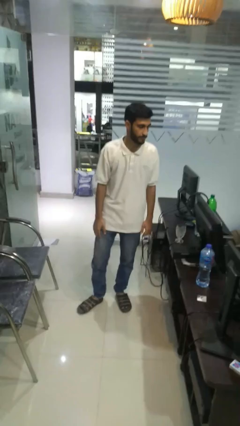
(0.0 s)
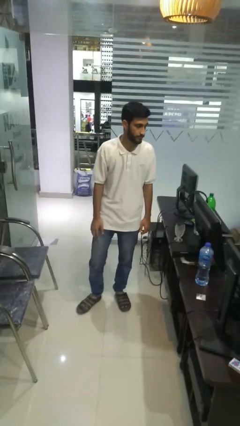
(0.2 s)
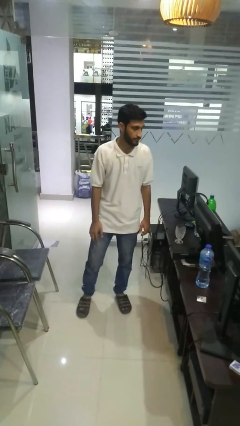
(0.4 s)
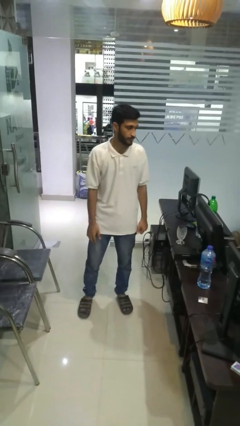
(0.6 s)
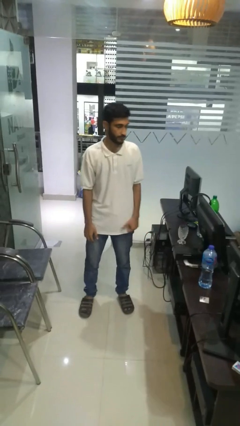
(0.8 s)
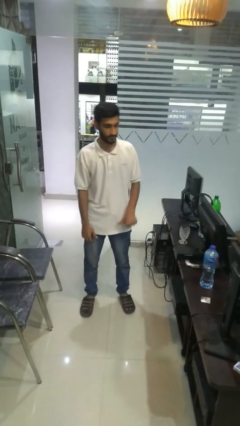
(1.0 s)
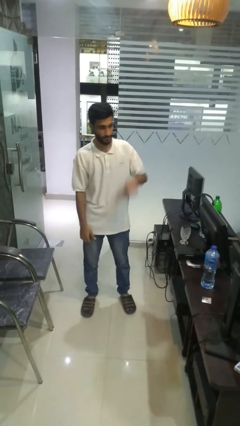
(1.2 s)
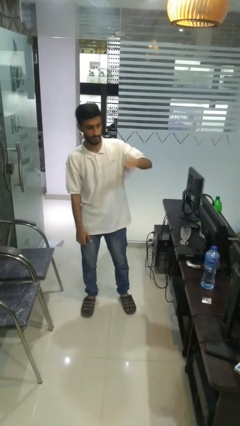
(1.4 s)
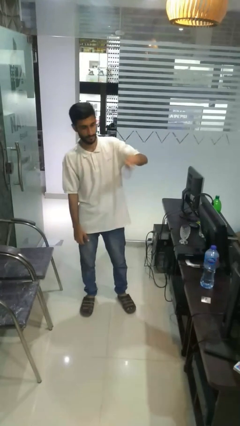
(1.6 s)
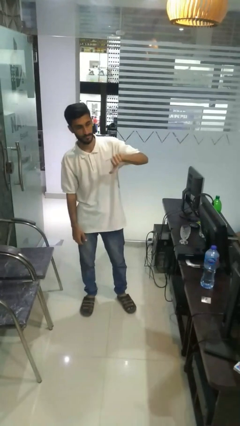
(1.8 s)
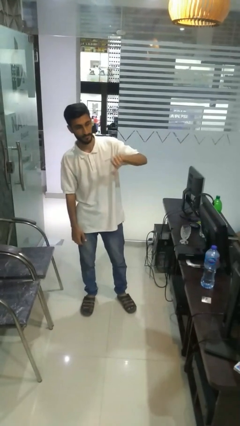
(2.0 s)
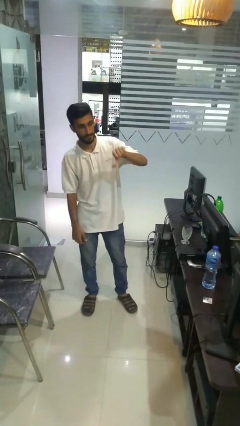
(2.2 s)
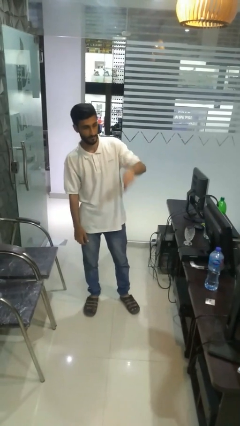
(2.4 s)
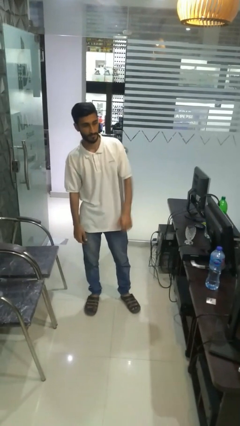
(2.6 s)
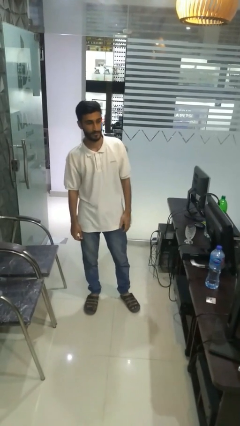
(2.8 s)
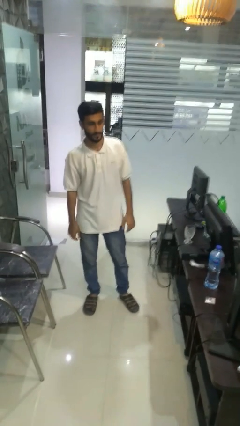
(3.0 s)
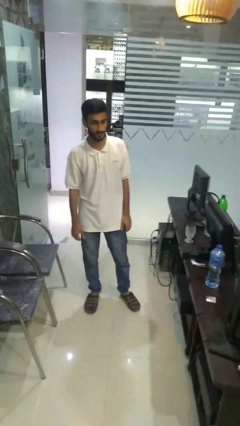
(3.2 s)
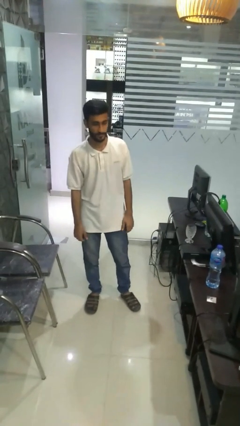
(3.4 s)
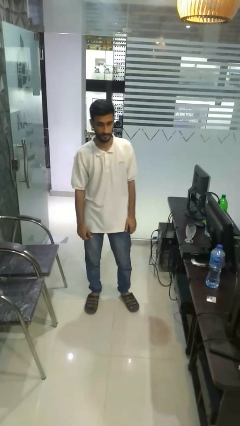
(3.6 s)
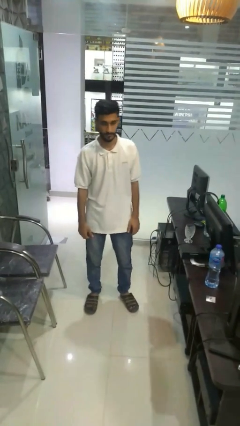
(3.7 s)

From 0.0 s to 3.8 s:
person gestures thumbs down

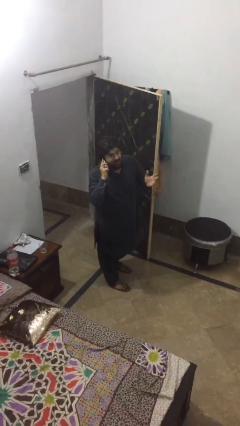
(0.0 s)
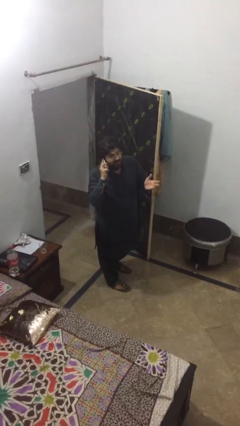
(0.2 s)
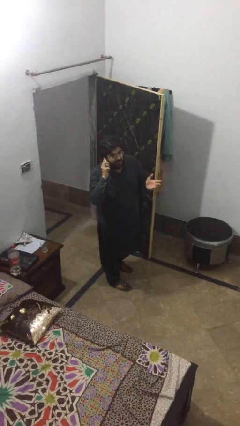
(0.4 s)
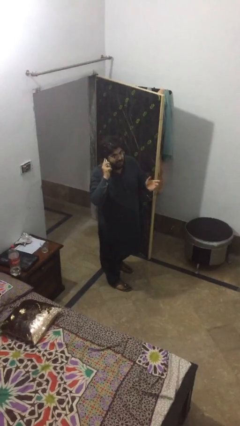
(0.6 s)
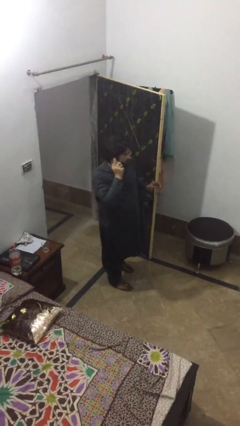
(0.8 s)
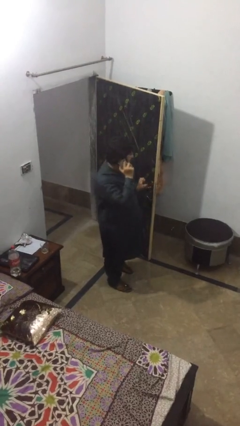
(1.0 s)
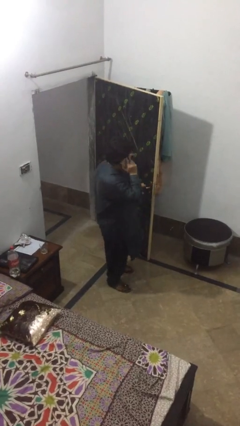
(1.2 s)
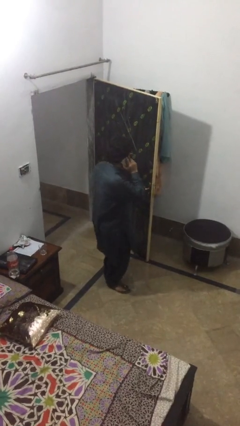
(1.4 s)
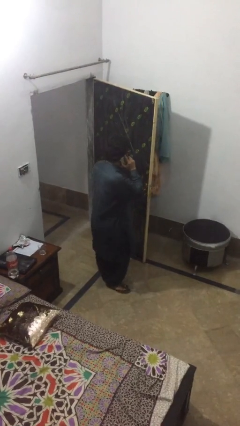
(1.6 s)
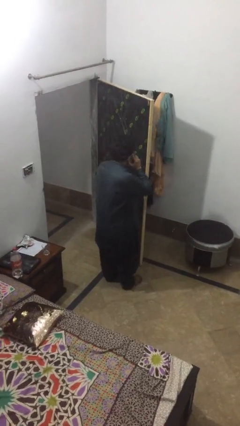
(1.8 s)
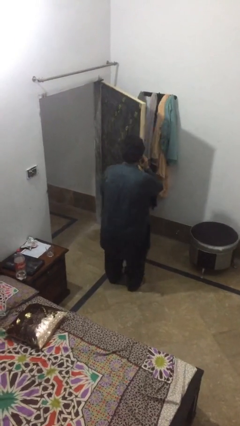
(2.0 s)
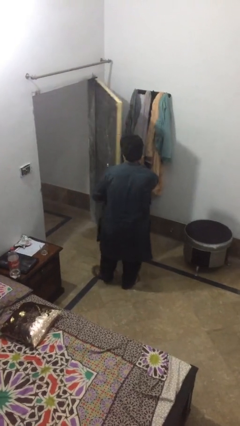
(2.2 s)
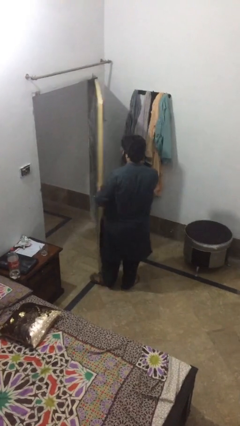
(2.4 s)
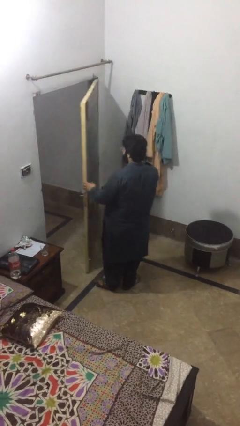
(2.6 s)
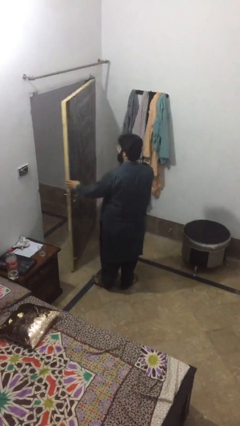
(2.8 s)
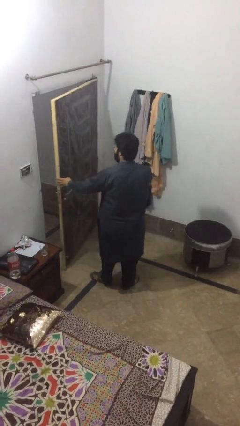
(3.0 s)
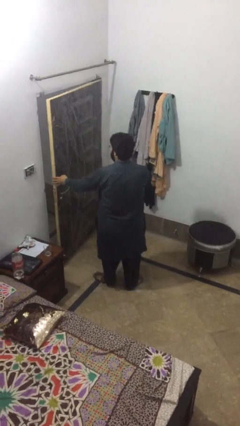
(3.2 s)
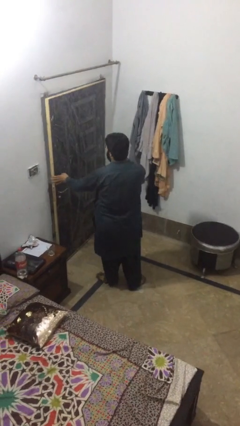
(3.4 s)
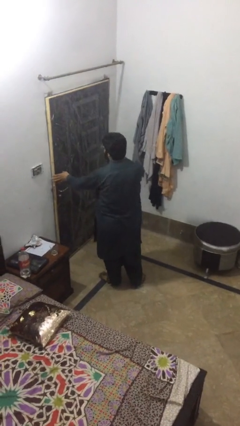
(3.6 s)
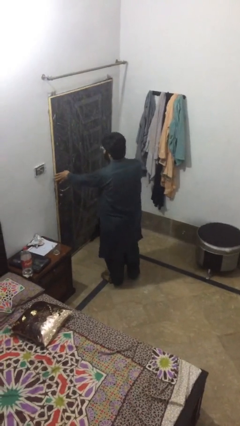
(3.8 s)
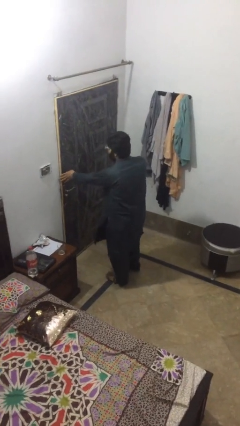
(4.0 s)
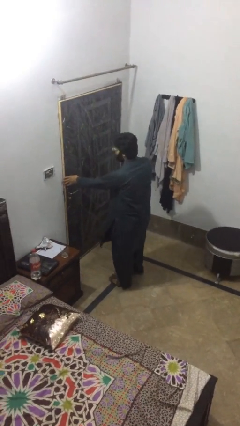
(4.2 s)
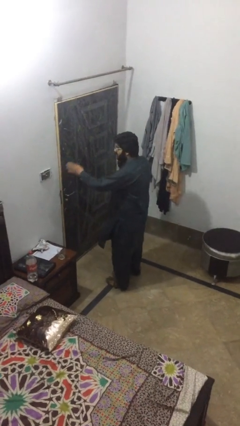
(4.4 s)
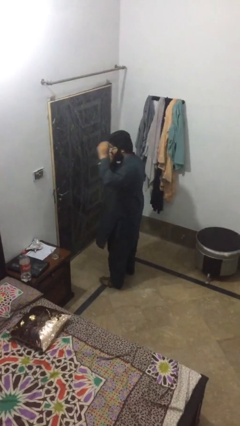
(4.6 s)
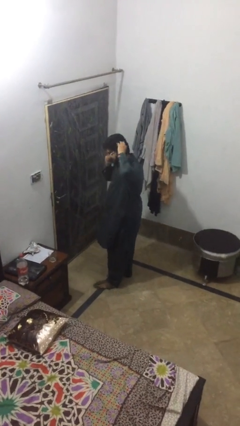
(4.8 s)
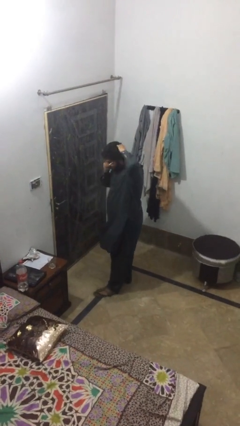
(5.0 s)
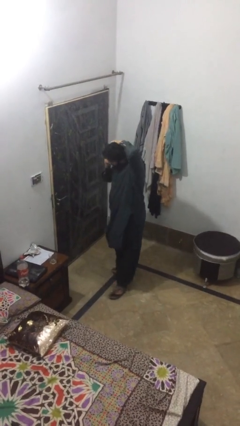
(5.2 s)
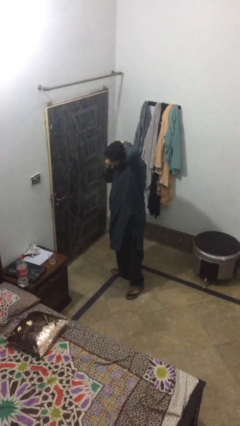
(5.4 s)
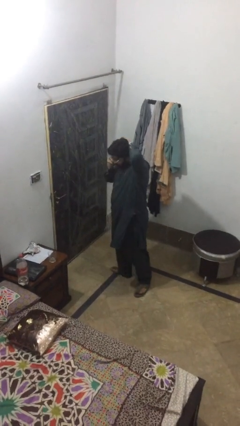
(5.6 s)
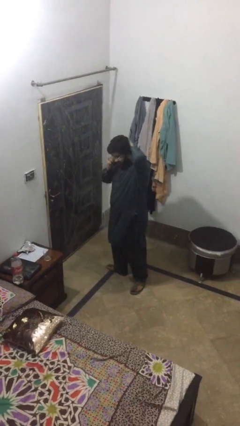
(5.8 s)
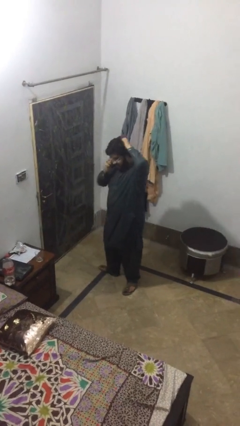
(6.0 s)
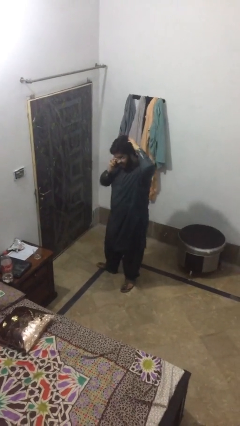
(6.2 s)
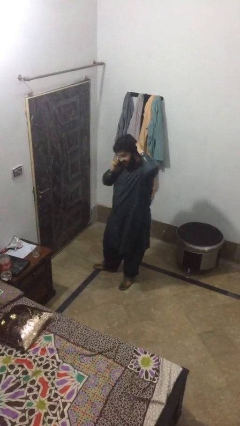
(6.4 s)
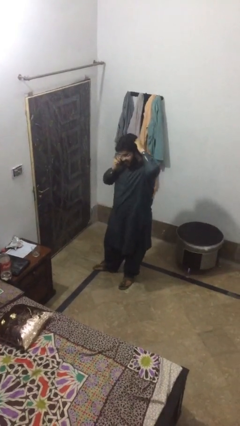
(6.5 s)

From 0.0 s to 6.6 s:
person closes facility door

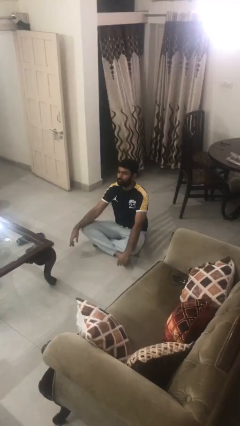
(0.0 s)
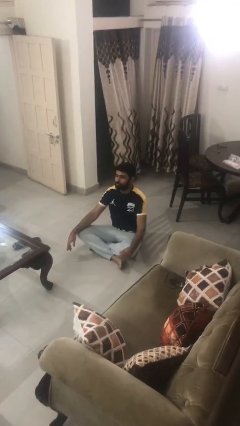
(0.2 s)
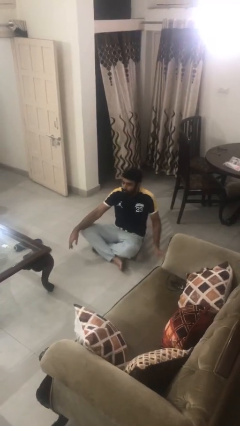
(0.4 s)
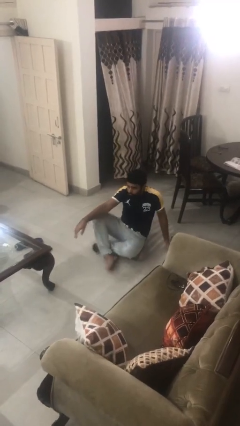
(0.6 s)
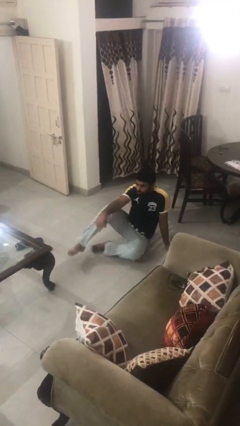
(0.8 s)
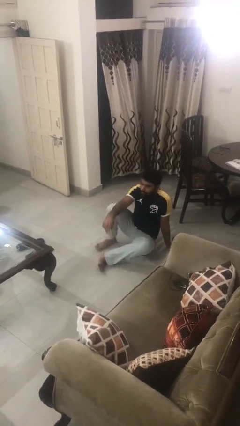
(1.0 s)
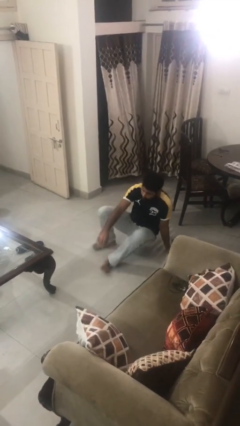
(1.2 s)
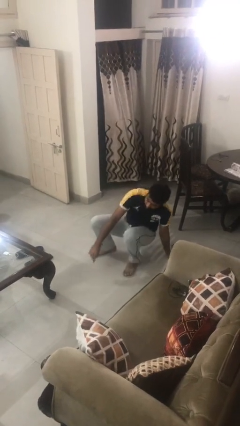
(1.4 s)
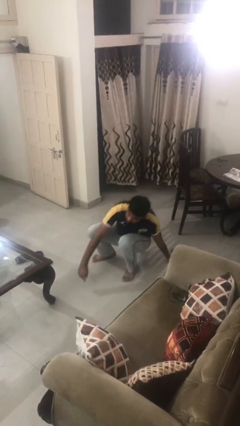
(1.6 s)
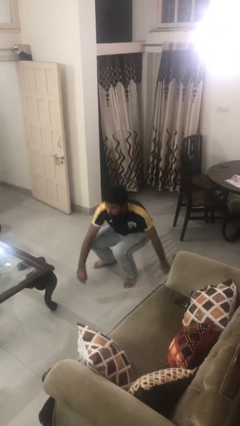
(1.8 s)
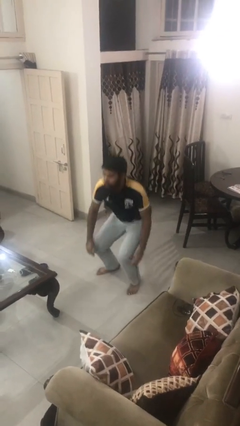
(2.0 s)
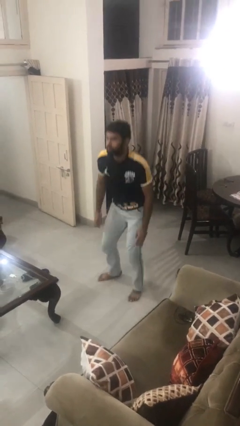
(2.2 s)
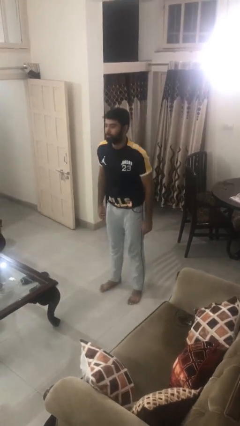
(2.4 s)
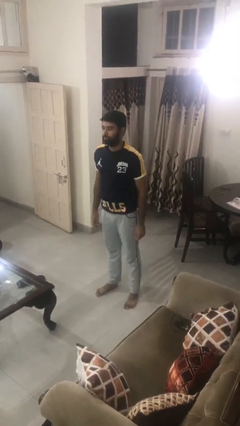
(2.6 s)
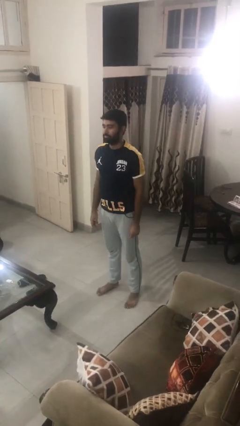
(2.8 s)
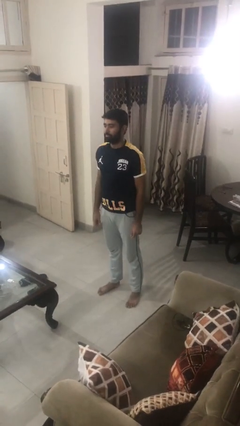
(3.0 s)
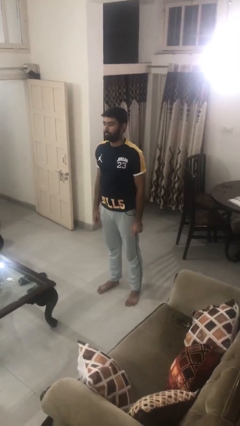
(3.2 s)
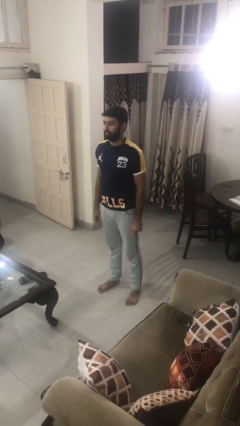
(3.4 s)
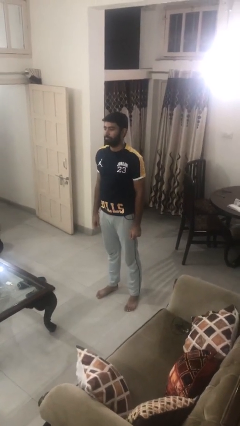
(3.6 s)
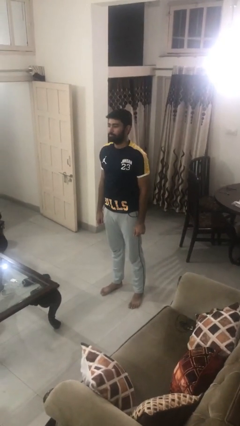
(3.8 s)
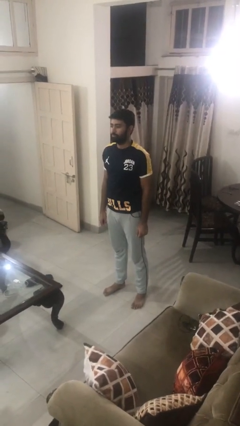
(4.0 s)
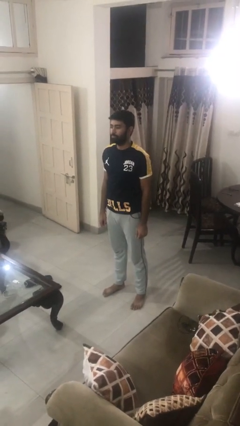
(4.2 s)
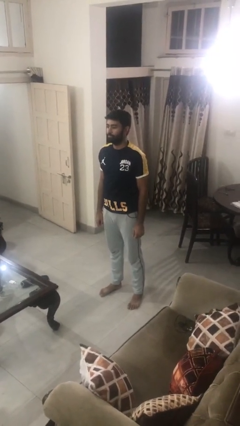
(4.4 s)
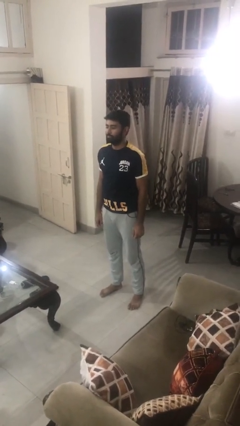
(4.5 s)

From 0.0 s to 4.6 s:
person stands up from floor

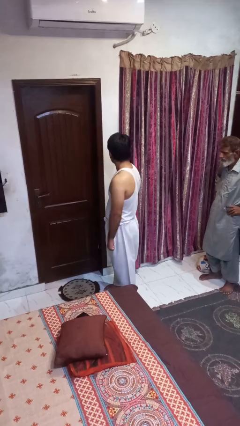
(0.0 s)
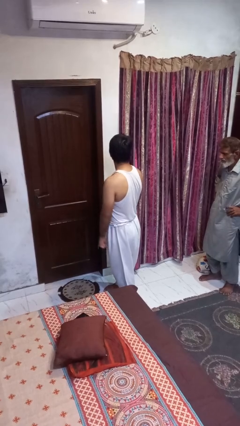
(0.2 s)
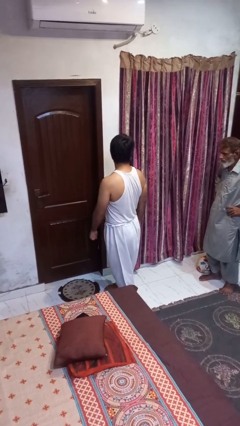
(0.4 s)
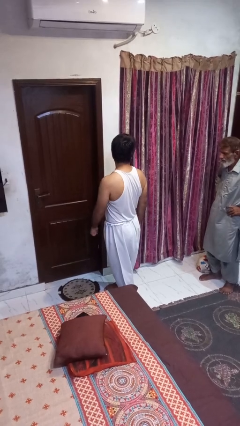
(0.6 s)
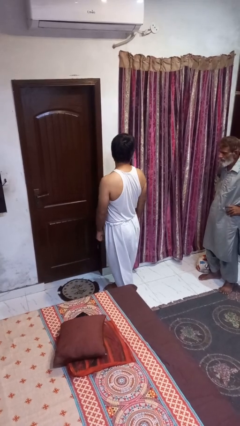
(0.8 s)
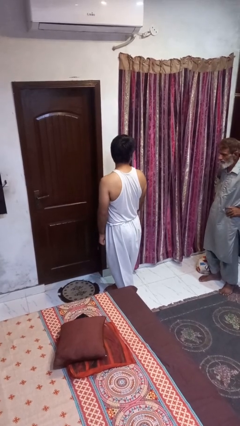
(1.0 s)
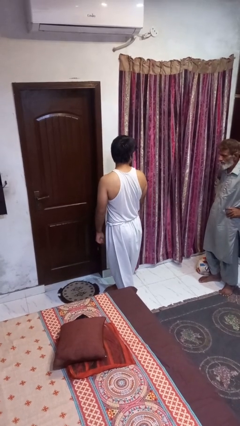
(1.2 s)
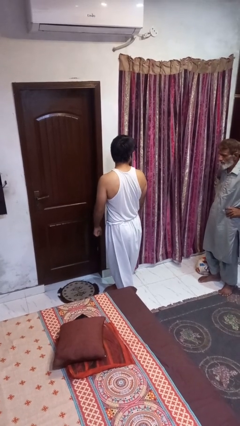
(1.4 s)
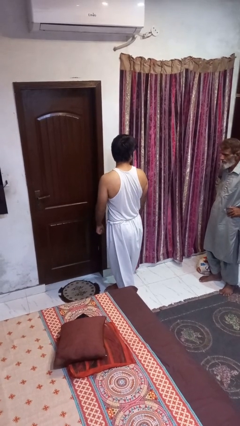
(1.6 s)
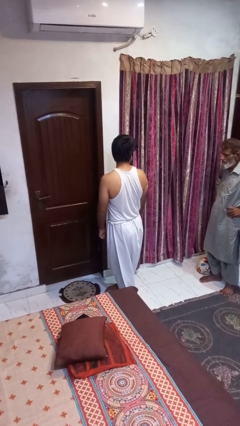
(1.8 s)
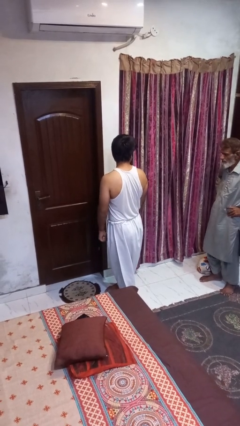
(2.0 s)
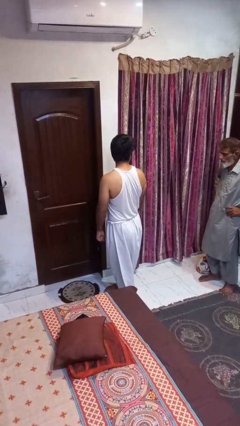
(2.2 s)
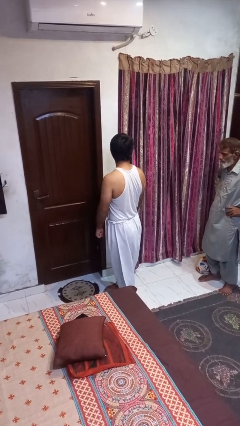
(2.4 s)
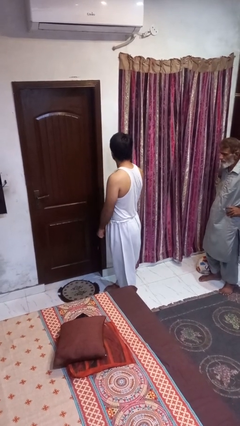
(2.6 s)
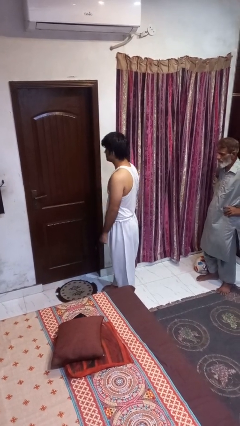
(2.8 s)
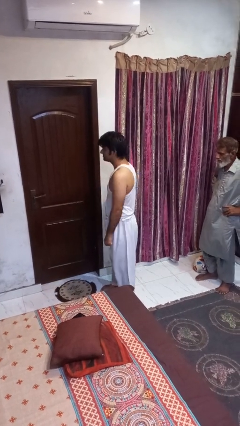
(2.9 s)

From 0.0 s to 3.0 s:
person looks over shoulder

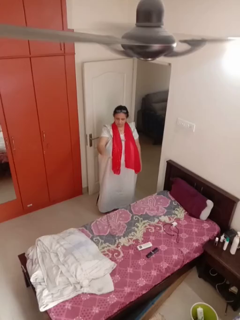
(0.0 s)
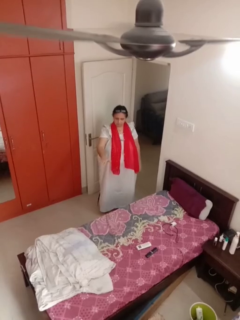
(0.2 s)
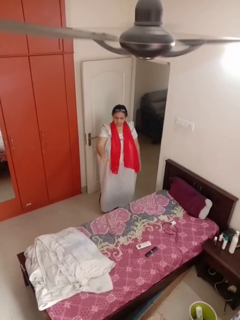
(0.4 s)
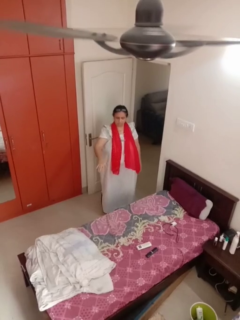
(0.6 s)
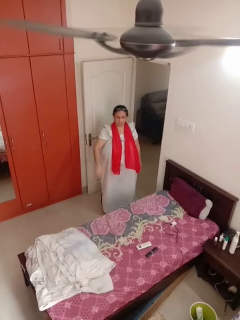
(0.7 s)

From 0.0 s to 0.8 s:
person gestures swipe down
